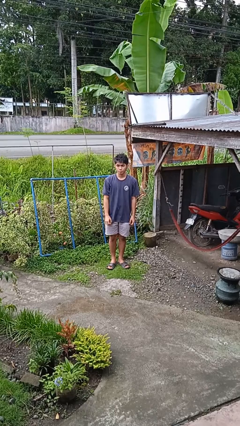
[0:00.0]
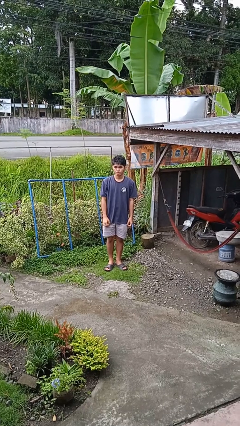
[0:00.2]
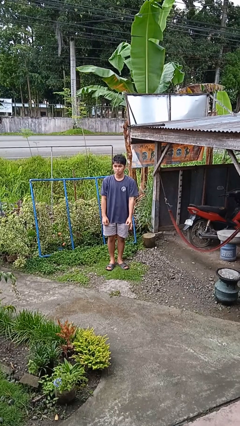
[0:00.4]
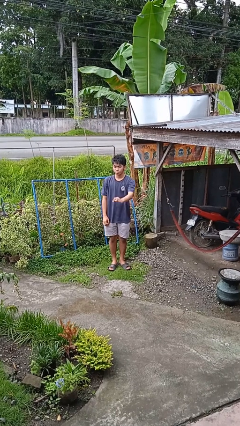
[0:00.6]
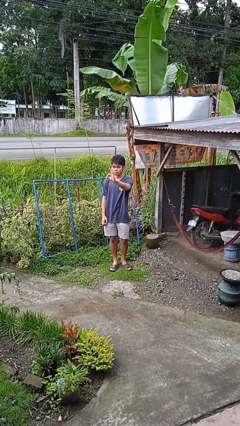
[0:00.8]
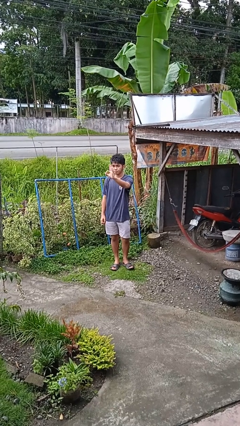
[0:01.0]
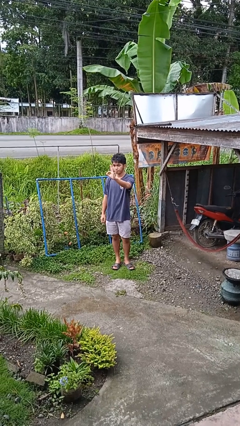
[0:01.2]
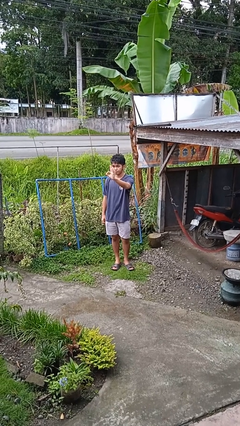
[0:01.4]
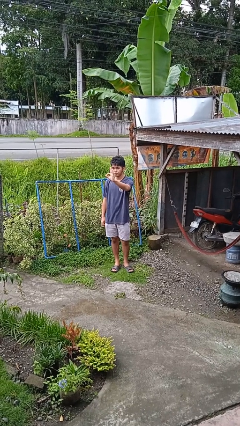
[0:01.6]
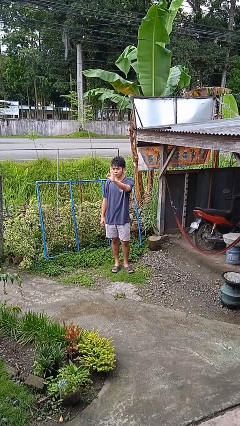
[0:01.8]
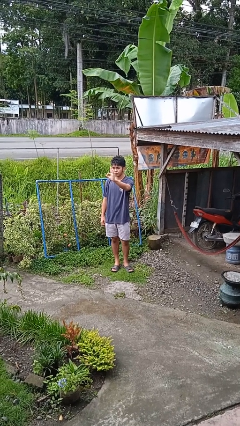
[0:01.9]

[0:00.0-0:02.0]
person gestures number three

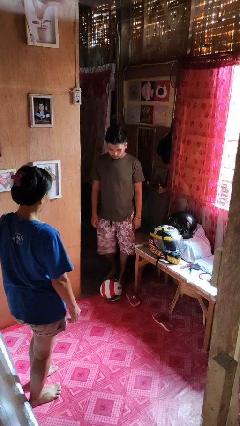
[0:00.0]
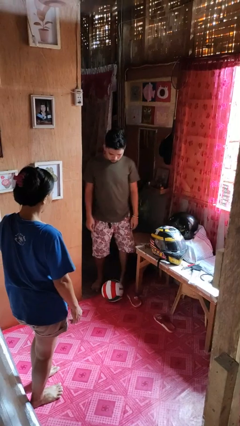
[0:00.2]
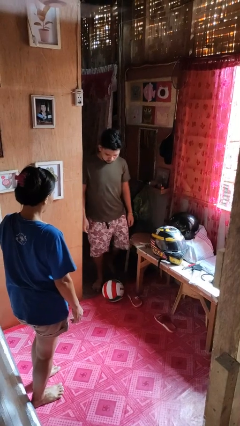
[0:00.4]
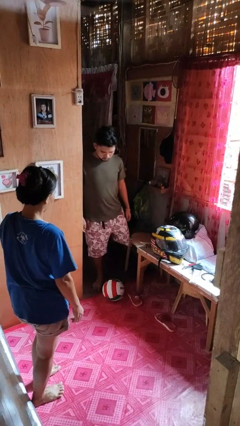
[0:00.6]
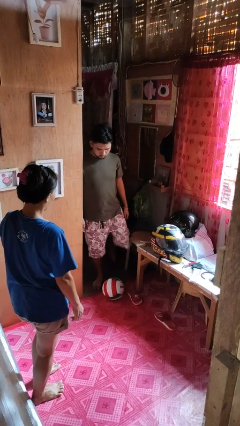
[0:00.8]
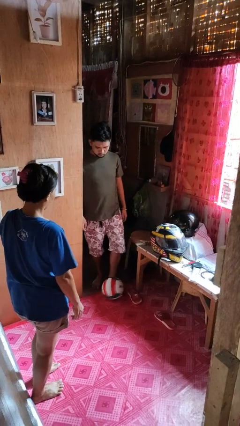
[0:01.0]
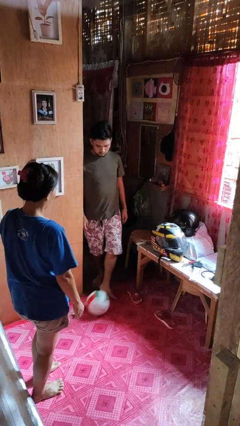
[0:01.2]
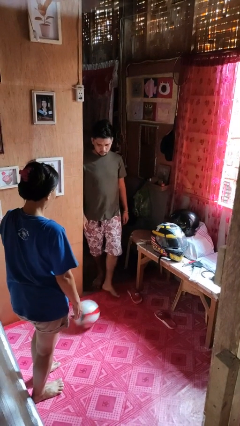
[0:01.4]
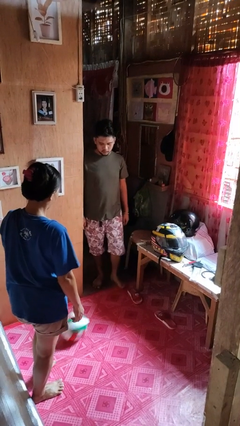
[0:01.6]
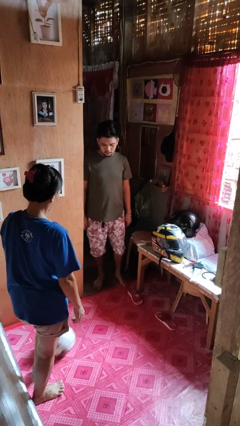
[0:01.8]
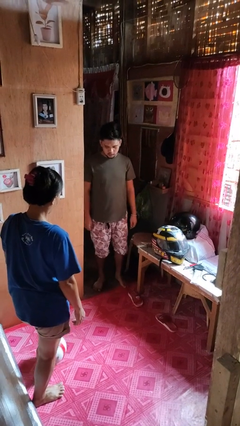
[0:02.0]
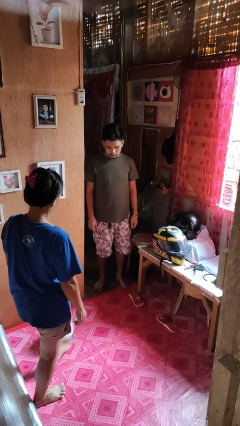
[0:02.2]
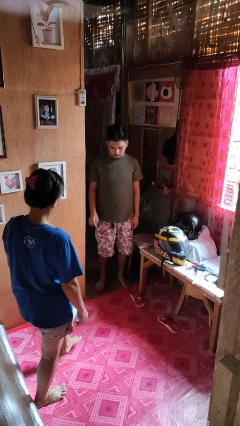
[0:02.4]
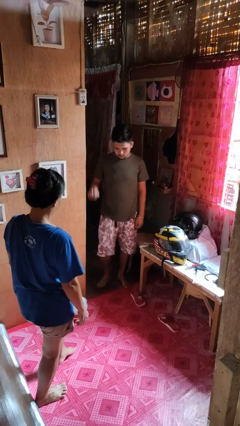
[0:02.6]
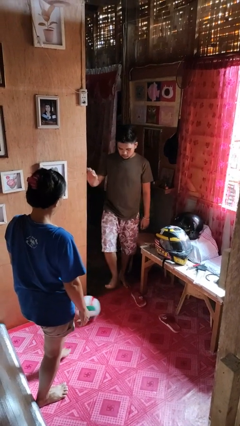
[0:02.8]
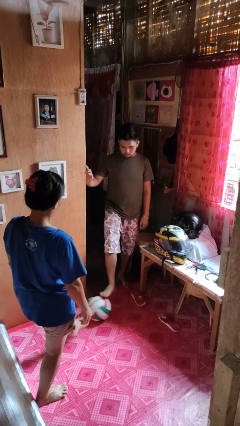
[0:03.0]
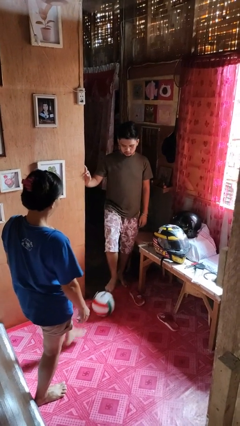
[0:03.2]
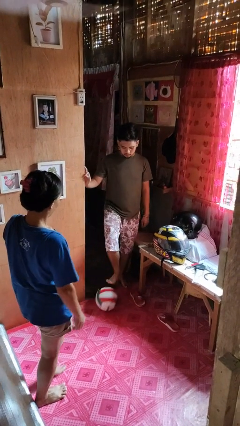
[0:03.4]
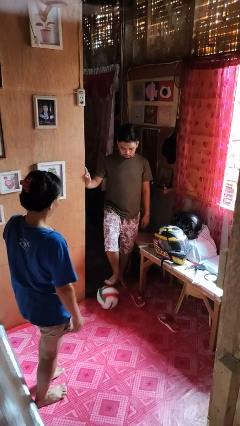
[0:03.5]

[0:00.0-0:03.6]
person kicks object to person

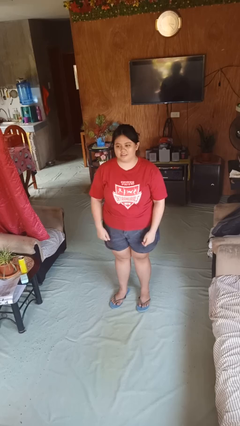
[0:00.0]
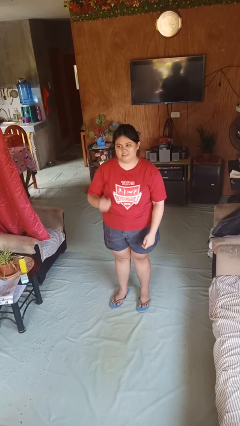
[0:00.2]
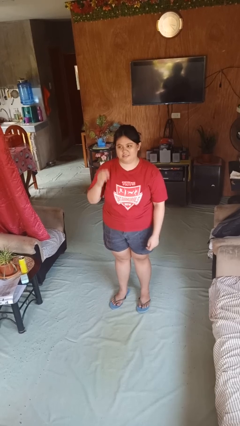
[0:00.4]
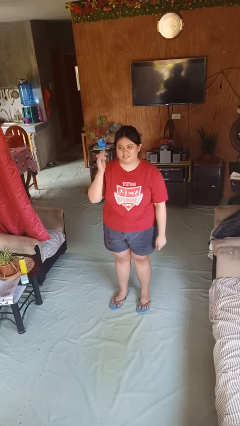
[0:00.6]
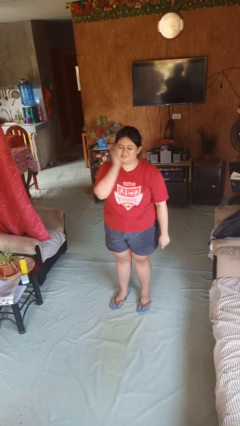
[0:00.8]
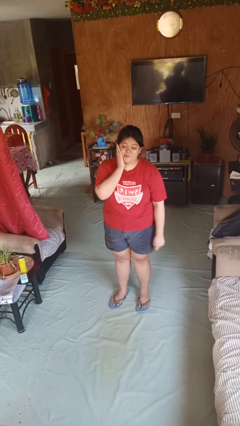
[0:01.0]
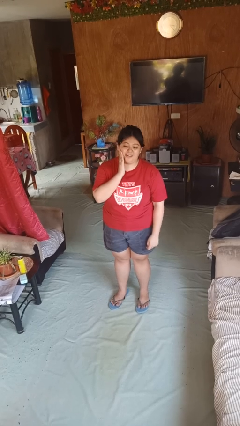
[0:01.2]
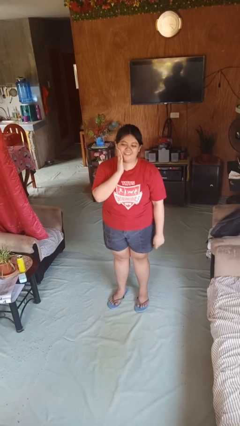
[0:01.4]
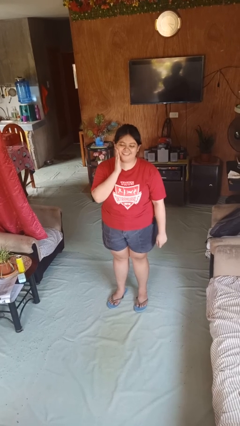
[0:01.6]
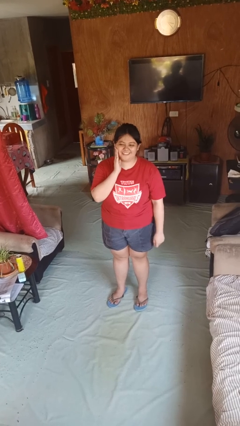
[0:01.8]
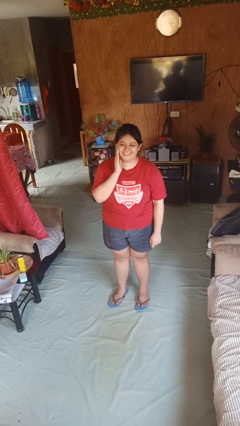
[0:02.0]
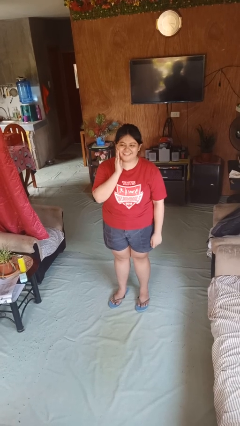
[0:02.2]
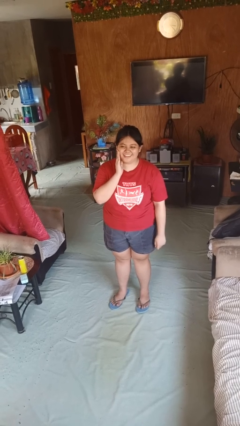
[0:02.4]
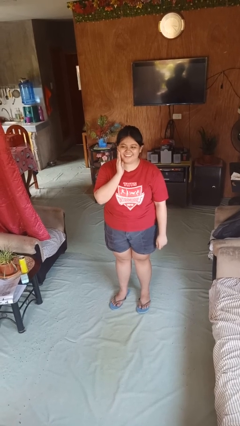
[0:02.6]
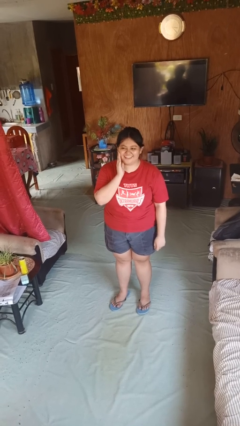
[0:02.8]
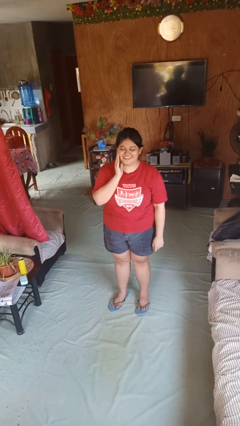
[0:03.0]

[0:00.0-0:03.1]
person swats bug

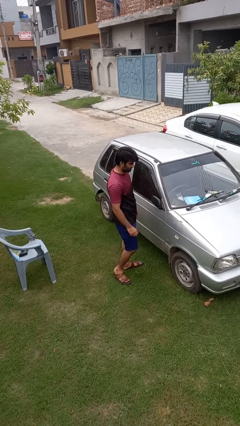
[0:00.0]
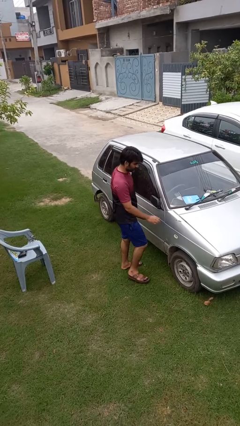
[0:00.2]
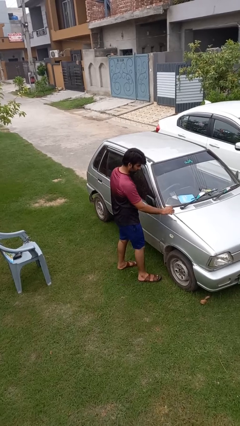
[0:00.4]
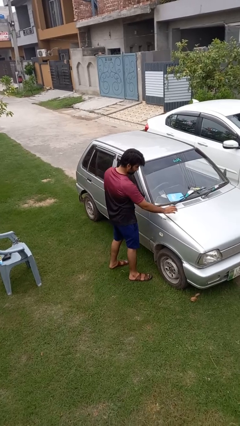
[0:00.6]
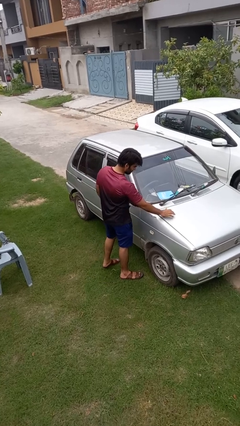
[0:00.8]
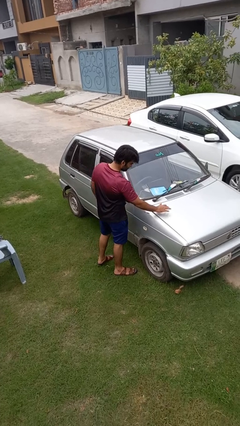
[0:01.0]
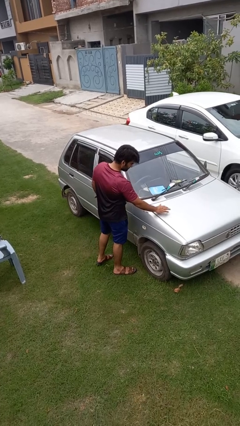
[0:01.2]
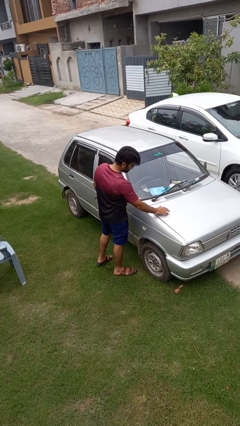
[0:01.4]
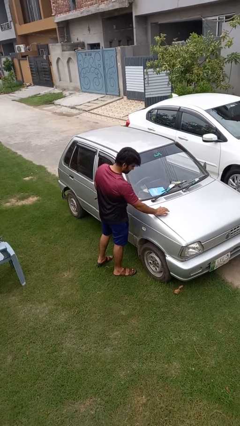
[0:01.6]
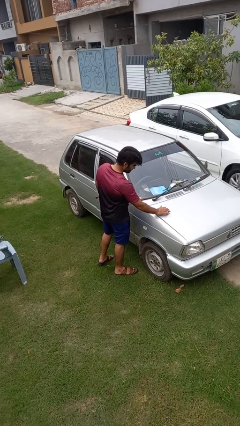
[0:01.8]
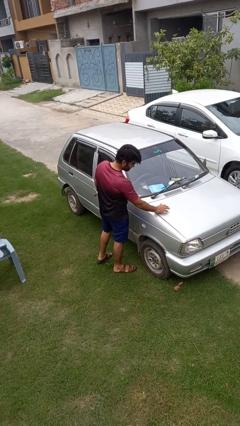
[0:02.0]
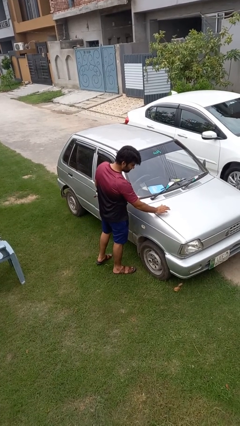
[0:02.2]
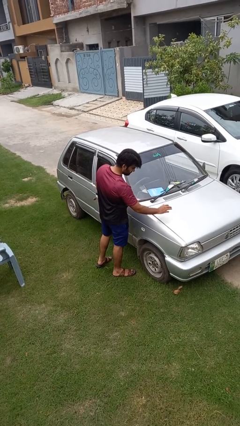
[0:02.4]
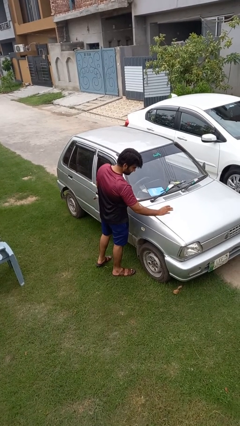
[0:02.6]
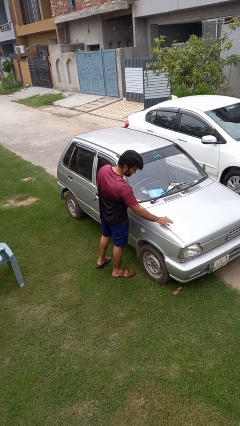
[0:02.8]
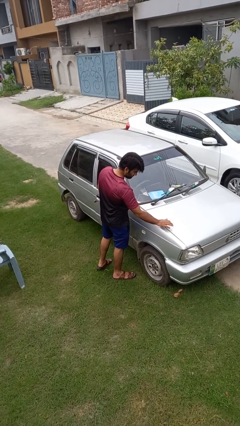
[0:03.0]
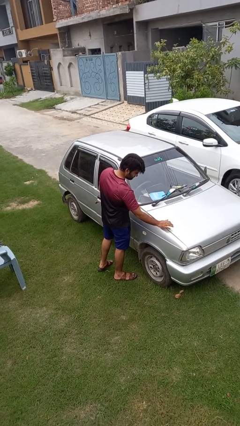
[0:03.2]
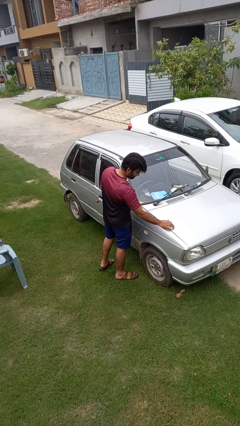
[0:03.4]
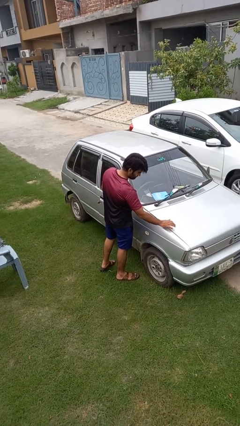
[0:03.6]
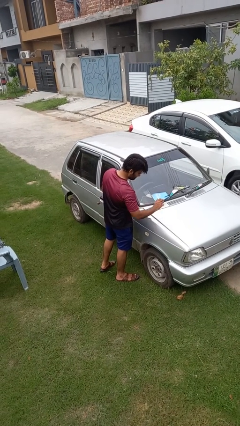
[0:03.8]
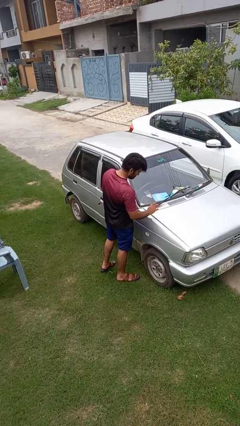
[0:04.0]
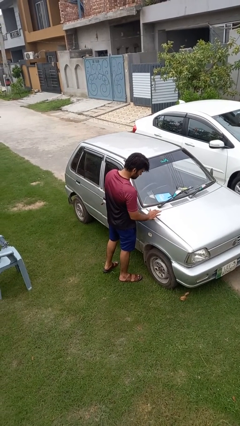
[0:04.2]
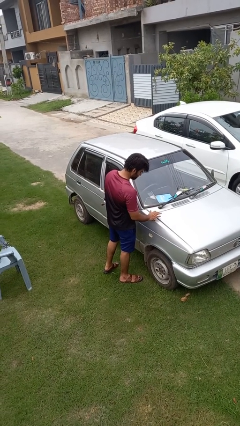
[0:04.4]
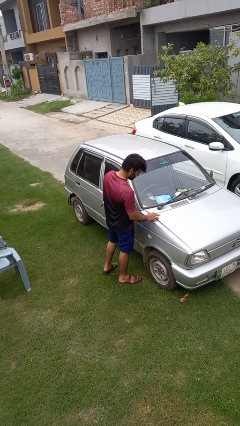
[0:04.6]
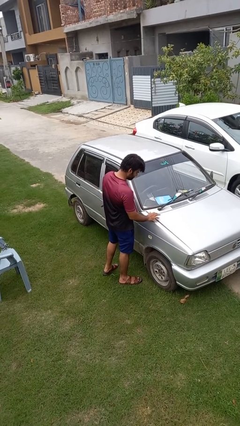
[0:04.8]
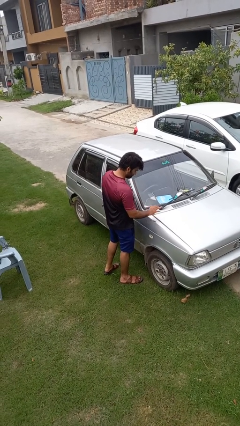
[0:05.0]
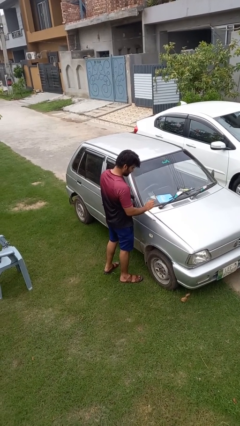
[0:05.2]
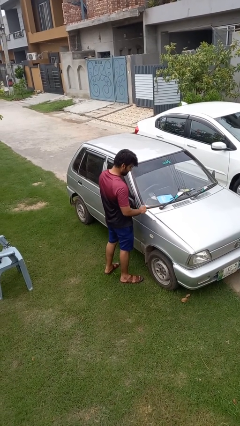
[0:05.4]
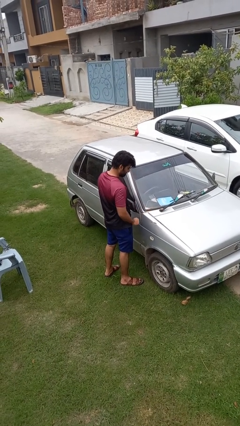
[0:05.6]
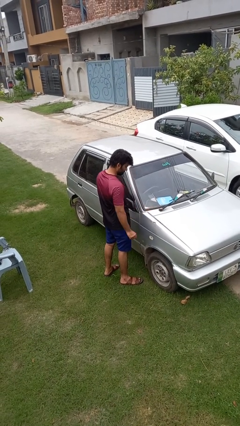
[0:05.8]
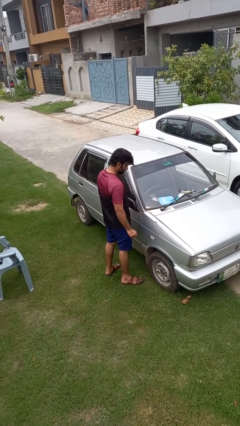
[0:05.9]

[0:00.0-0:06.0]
person taps object with finger

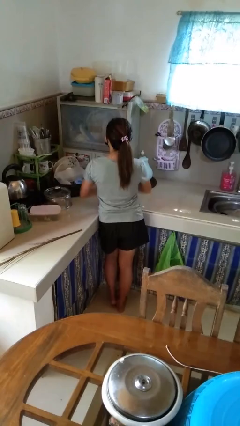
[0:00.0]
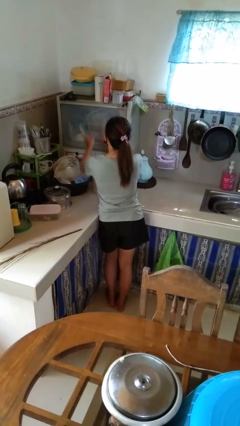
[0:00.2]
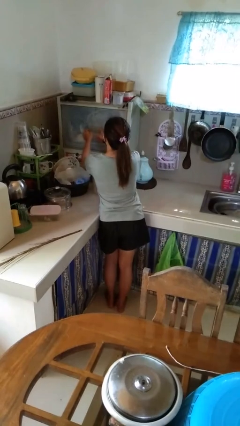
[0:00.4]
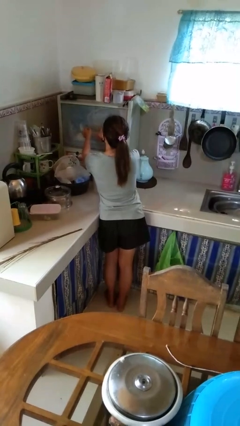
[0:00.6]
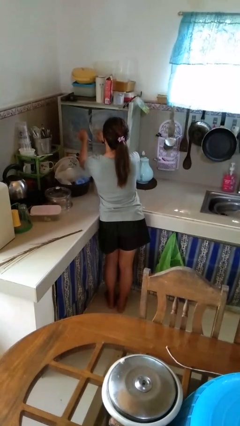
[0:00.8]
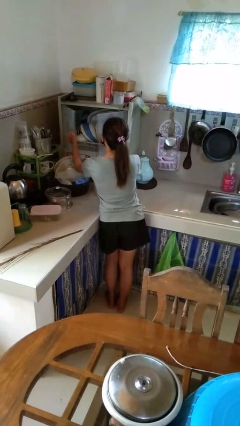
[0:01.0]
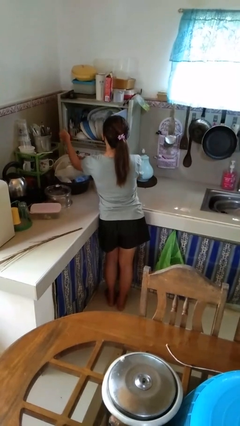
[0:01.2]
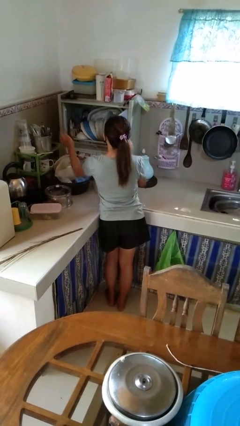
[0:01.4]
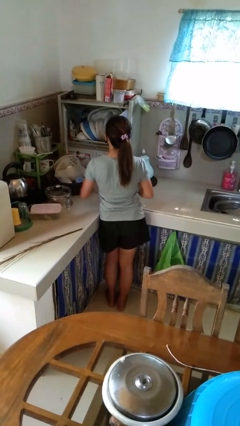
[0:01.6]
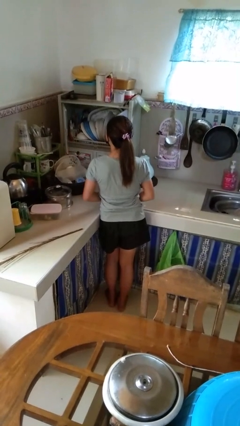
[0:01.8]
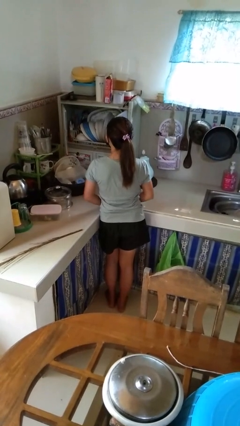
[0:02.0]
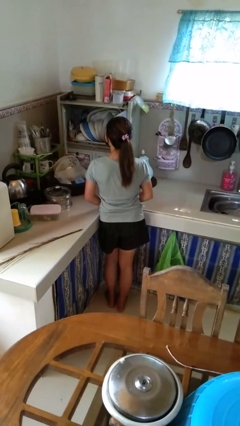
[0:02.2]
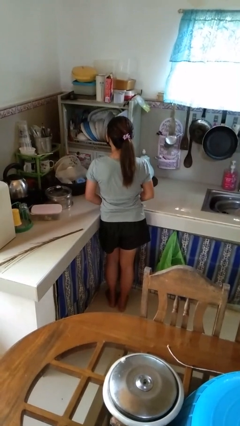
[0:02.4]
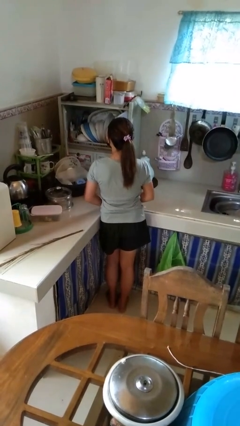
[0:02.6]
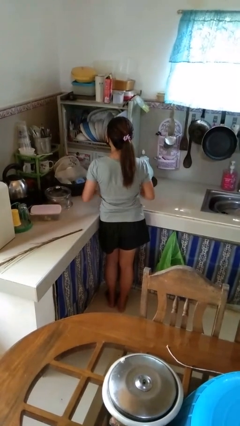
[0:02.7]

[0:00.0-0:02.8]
person opens kitchen drawer
